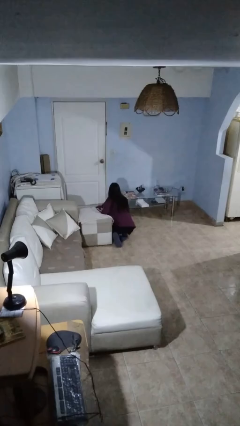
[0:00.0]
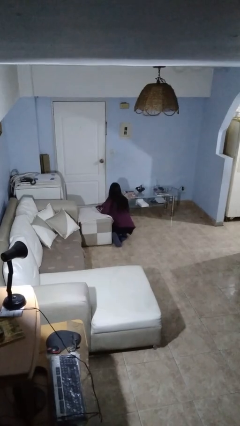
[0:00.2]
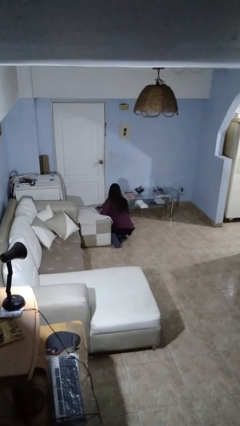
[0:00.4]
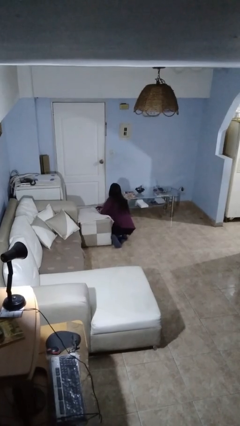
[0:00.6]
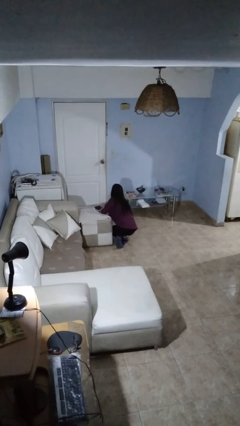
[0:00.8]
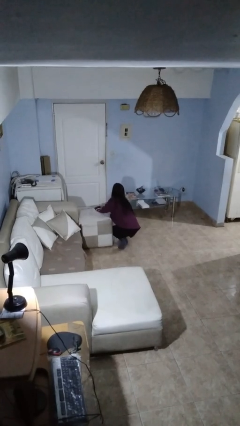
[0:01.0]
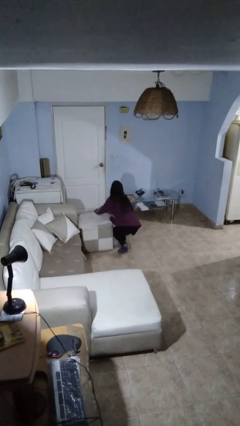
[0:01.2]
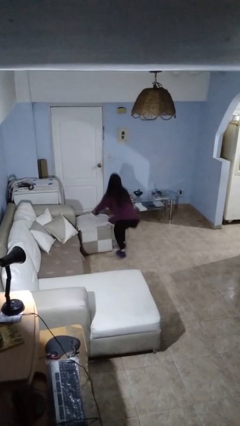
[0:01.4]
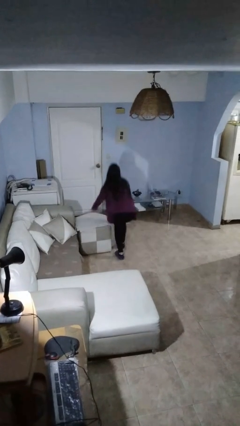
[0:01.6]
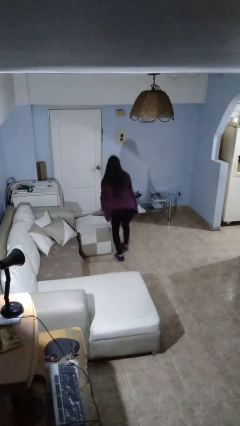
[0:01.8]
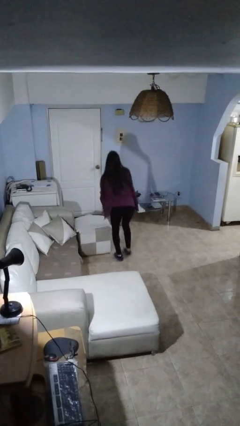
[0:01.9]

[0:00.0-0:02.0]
person stands up from floor

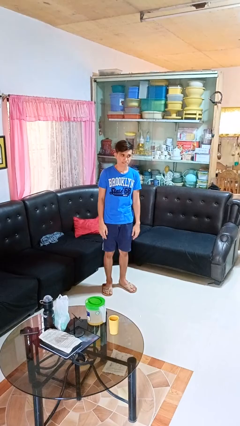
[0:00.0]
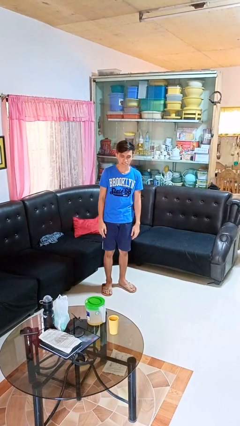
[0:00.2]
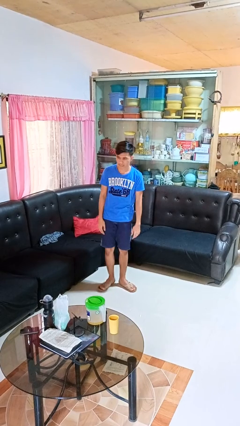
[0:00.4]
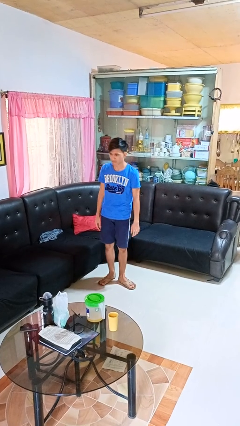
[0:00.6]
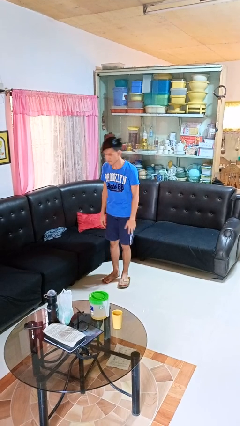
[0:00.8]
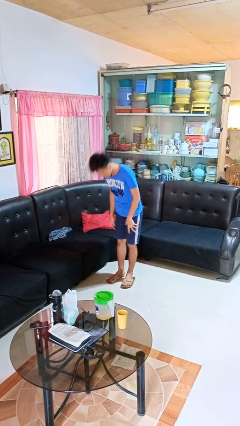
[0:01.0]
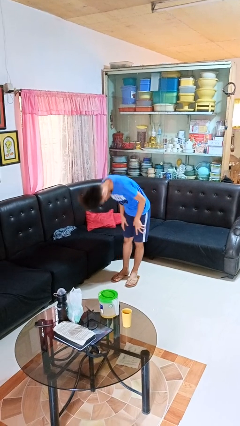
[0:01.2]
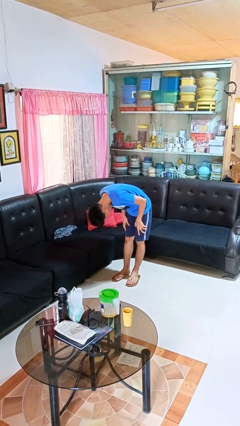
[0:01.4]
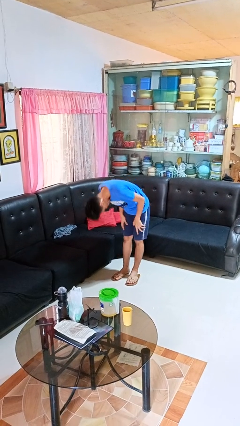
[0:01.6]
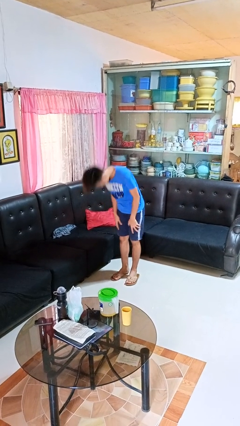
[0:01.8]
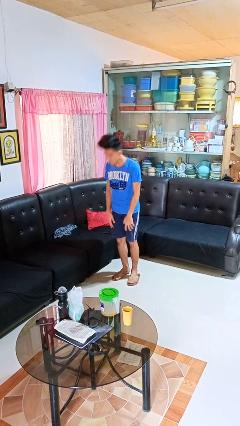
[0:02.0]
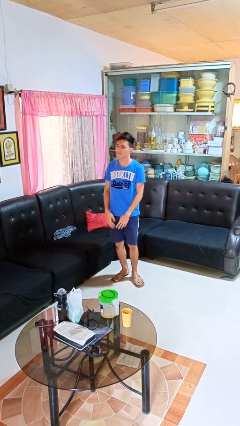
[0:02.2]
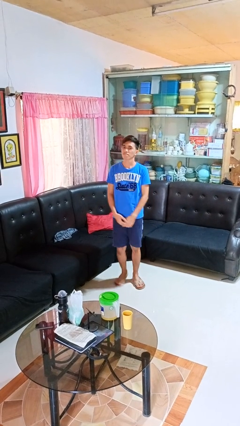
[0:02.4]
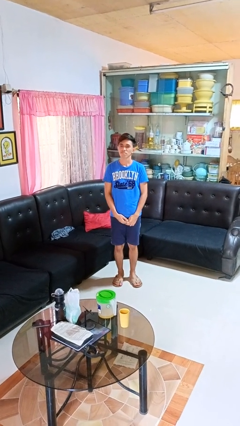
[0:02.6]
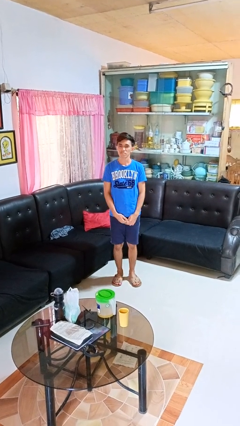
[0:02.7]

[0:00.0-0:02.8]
person bows

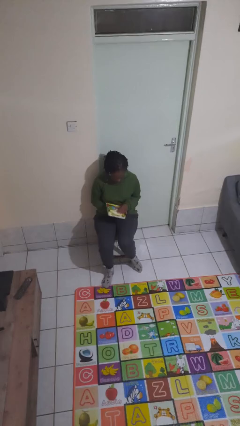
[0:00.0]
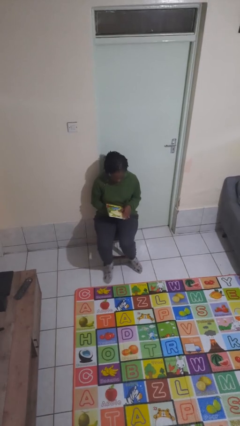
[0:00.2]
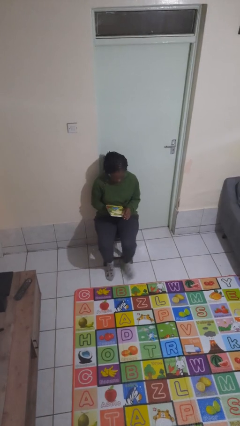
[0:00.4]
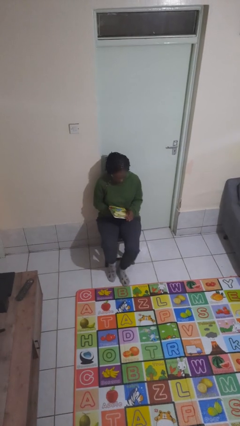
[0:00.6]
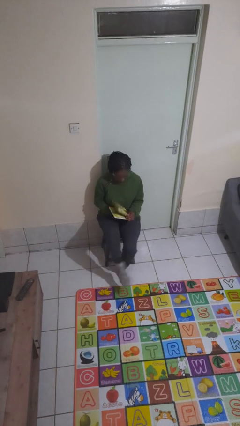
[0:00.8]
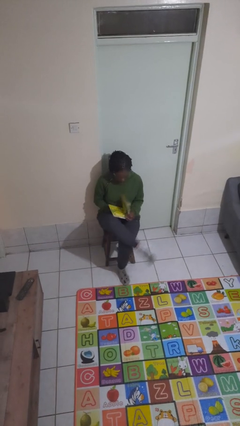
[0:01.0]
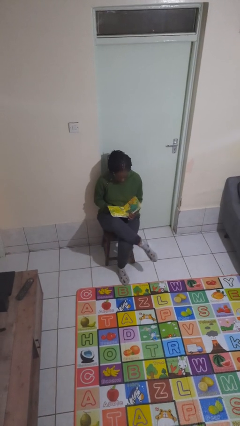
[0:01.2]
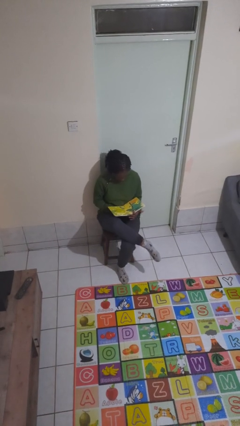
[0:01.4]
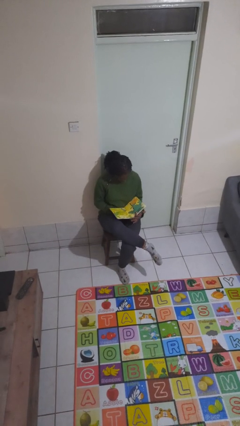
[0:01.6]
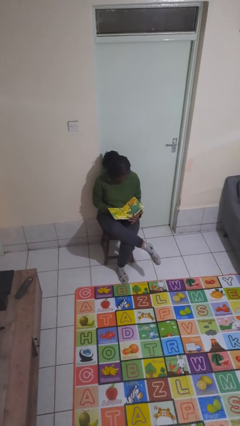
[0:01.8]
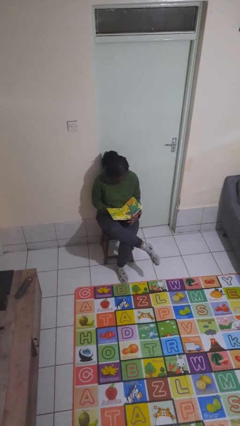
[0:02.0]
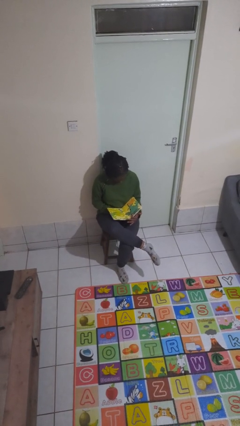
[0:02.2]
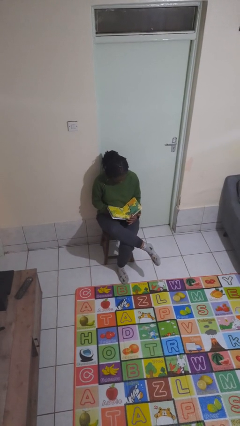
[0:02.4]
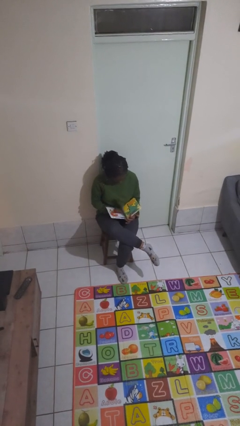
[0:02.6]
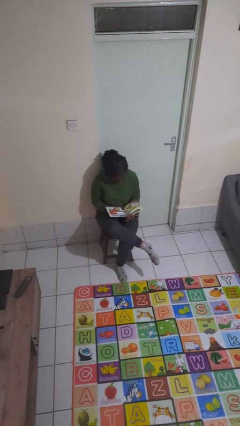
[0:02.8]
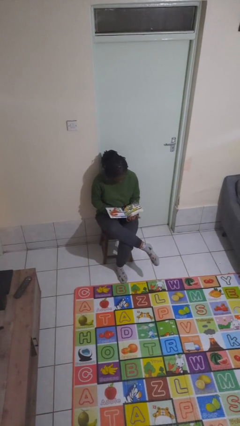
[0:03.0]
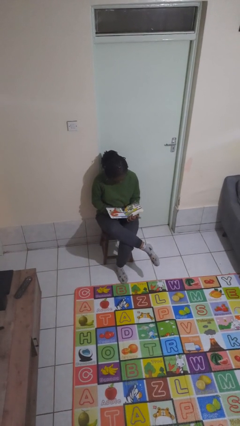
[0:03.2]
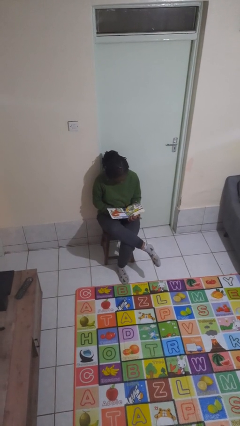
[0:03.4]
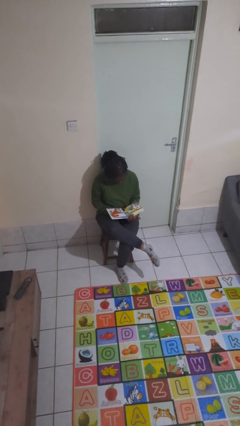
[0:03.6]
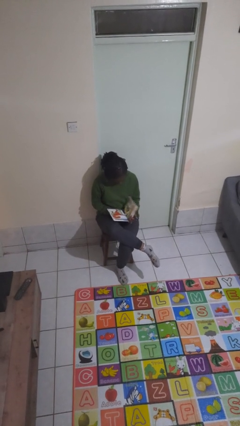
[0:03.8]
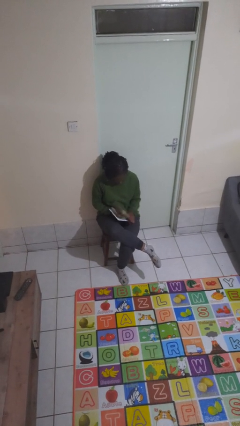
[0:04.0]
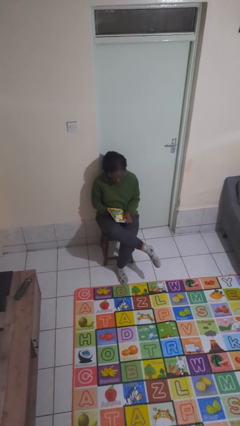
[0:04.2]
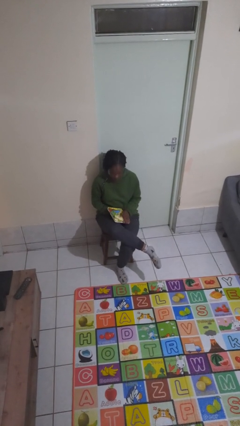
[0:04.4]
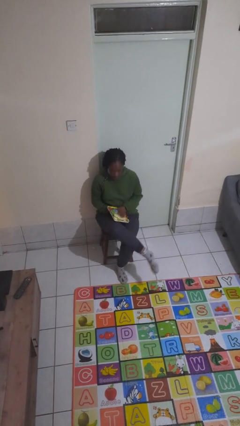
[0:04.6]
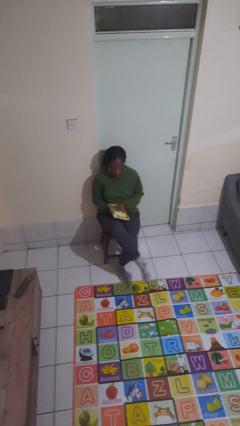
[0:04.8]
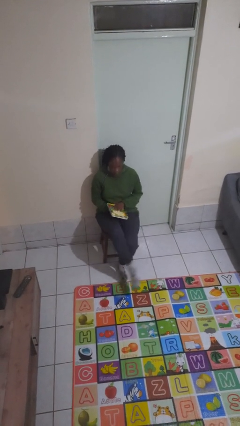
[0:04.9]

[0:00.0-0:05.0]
person reads book

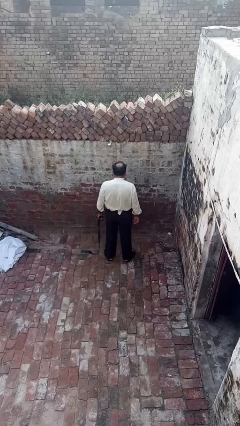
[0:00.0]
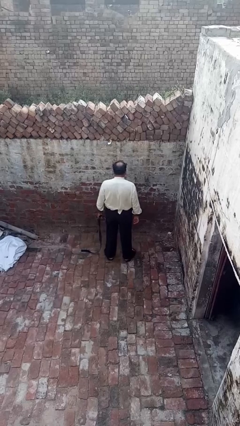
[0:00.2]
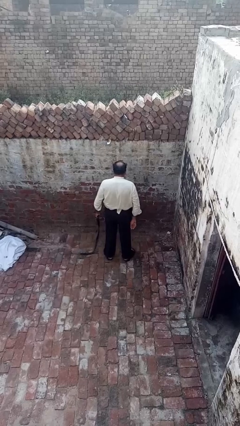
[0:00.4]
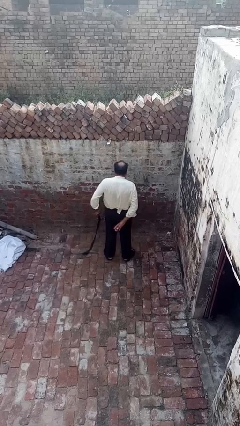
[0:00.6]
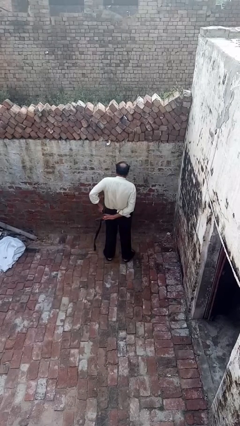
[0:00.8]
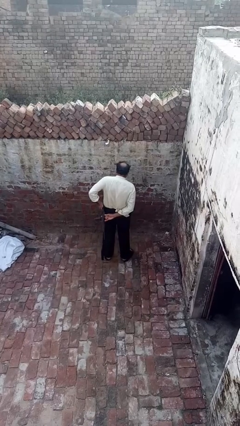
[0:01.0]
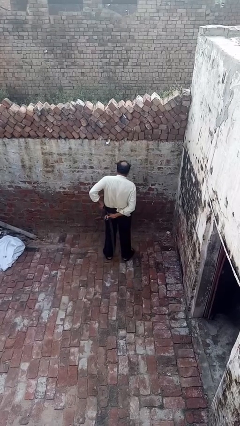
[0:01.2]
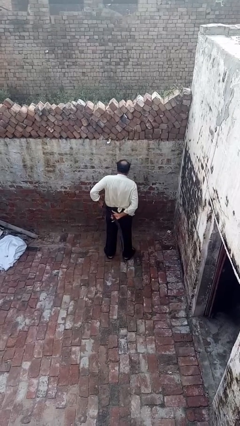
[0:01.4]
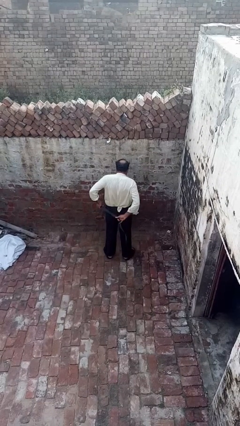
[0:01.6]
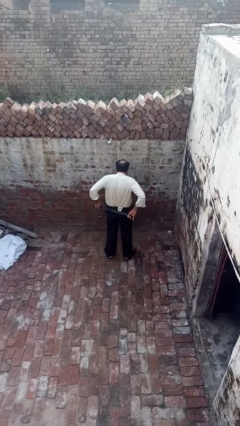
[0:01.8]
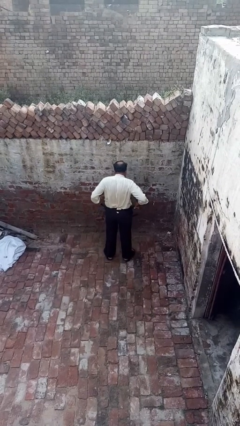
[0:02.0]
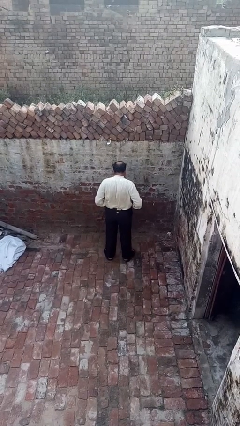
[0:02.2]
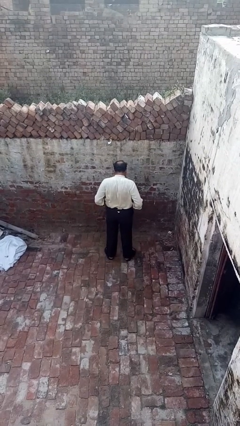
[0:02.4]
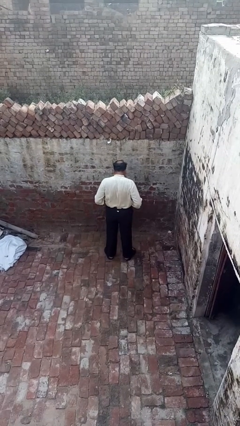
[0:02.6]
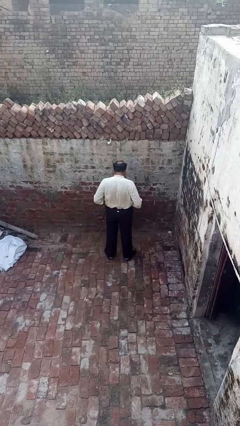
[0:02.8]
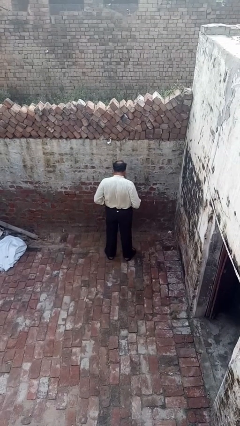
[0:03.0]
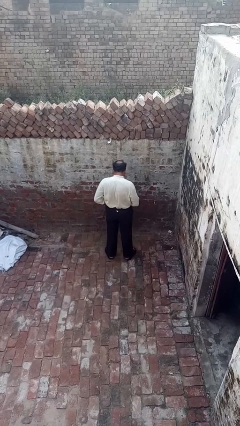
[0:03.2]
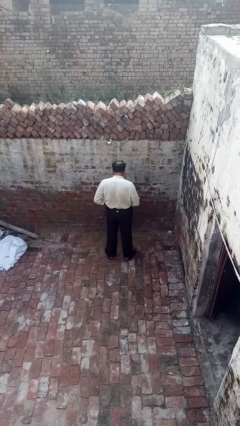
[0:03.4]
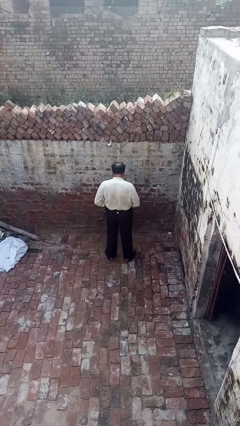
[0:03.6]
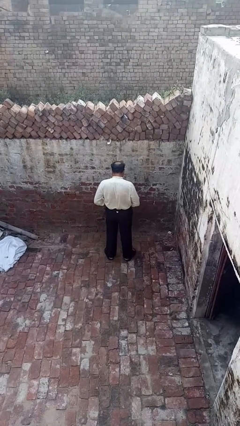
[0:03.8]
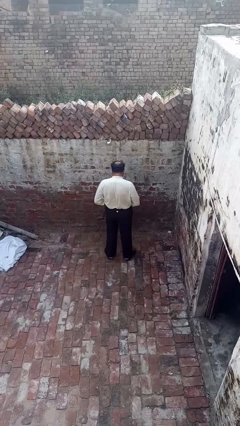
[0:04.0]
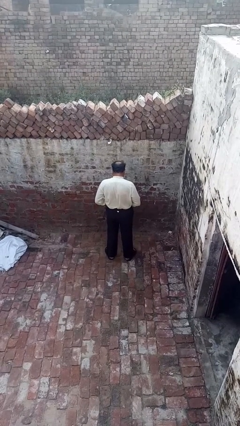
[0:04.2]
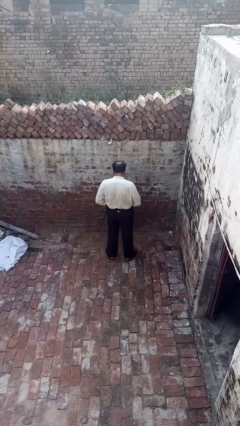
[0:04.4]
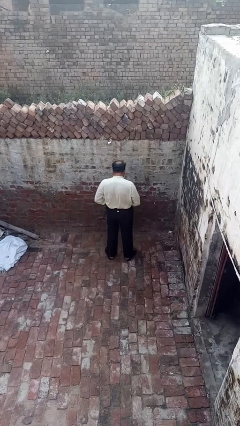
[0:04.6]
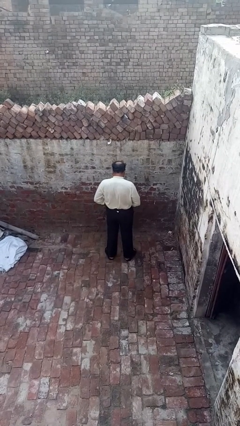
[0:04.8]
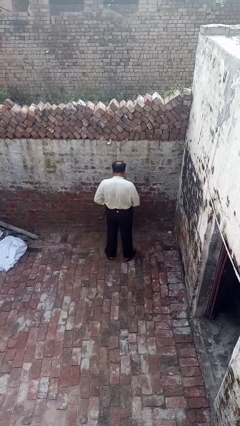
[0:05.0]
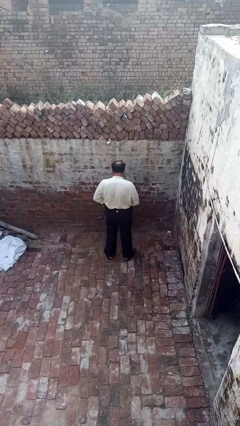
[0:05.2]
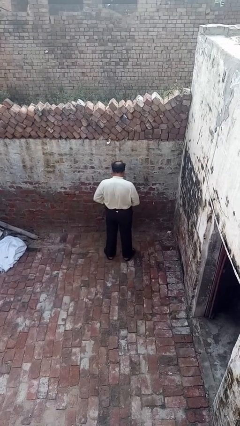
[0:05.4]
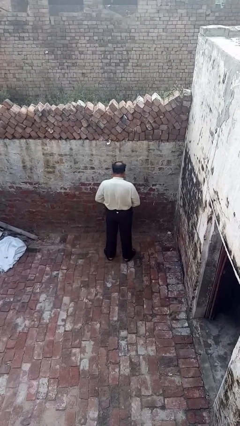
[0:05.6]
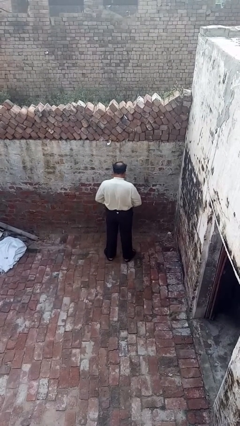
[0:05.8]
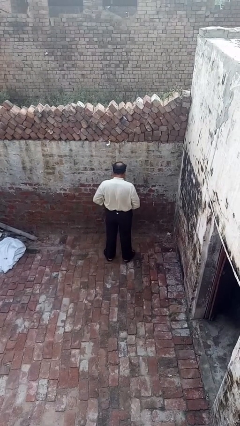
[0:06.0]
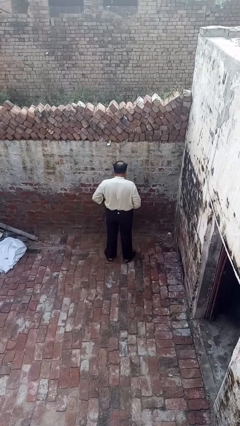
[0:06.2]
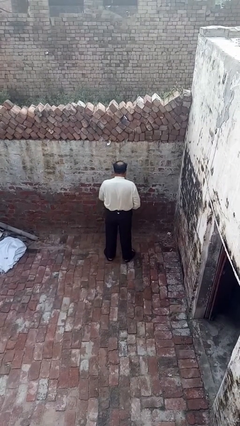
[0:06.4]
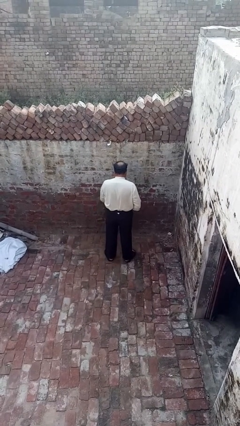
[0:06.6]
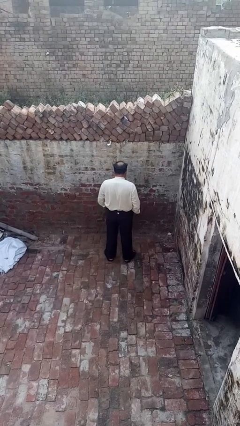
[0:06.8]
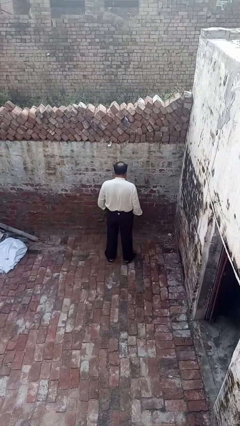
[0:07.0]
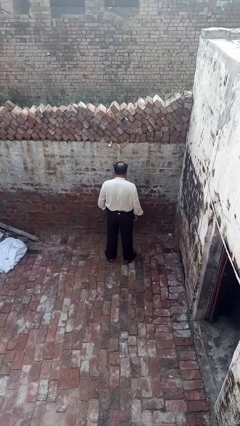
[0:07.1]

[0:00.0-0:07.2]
person puts on belt

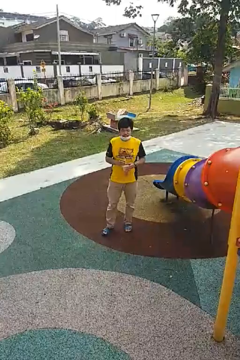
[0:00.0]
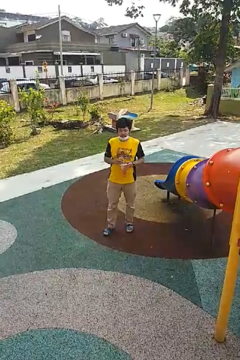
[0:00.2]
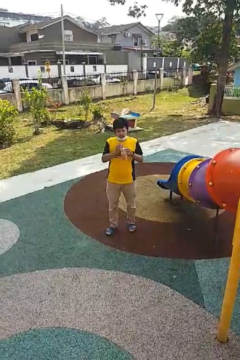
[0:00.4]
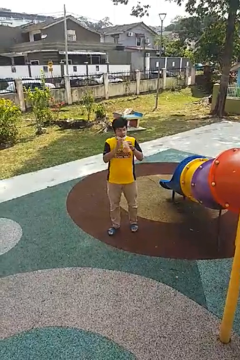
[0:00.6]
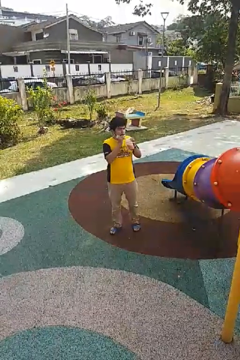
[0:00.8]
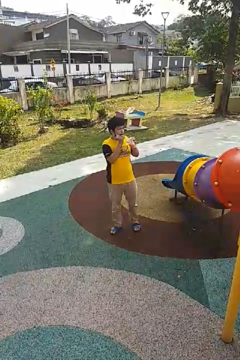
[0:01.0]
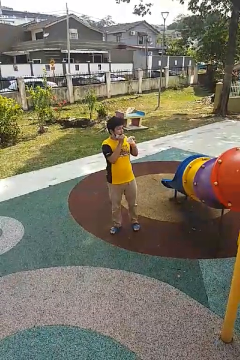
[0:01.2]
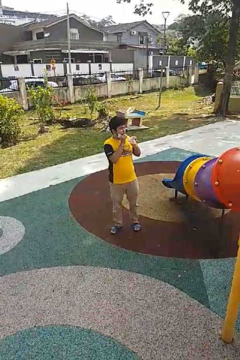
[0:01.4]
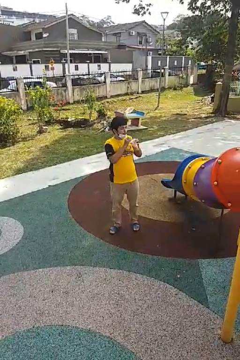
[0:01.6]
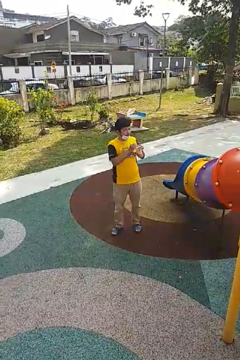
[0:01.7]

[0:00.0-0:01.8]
person drinks from straw
